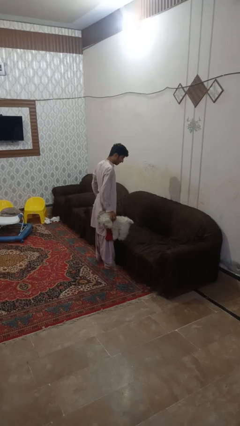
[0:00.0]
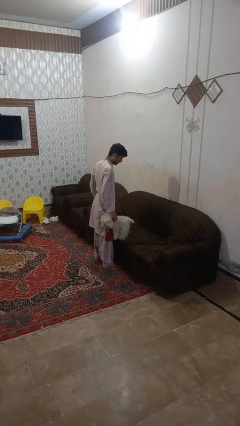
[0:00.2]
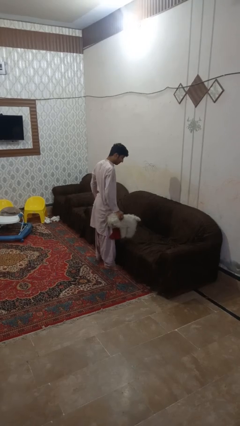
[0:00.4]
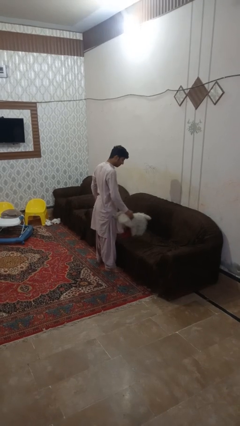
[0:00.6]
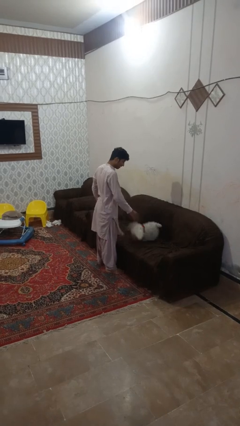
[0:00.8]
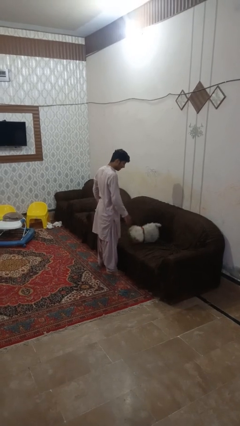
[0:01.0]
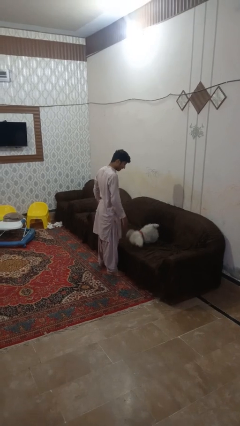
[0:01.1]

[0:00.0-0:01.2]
person puts down object on couch

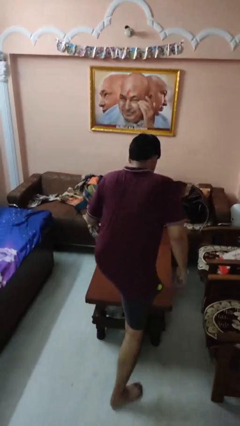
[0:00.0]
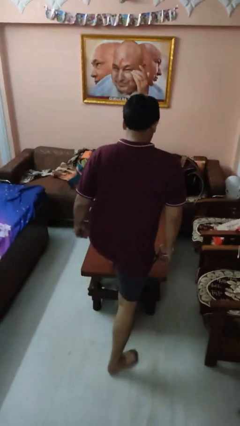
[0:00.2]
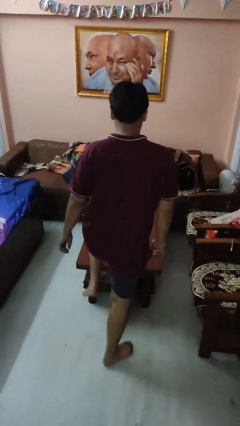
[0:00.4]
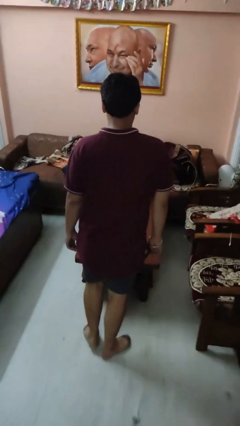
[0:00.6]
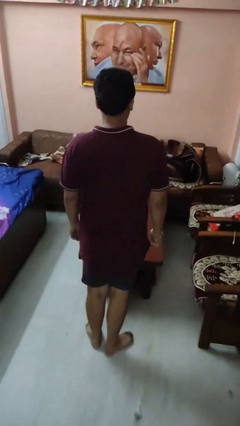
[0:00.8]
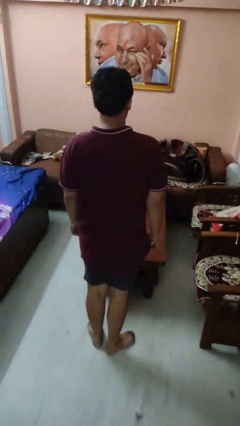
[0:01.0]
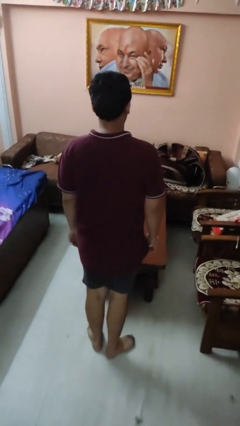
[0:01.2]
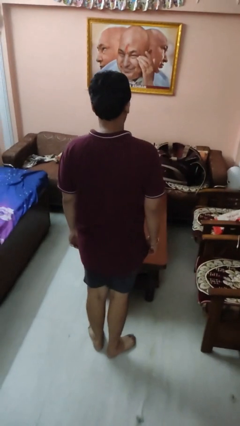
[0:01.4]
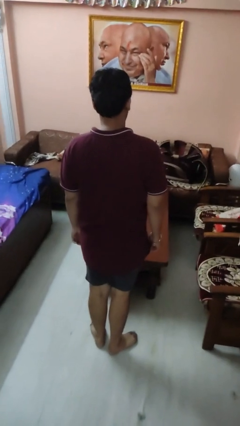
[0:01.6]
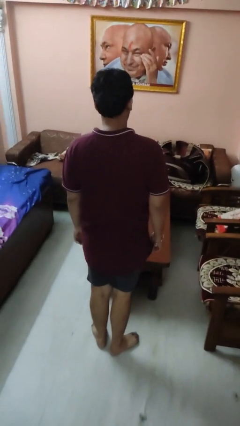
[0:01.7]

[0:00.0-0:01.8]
person climbs off table

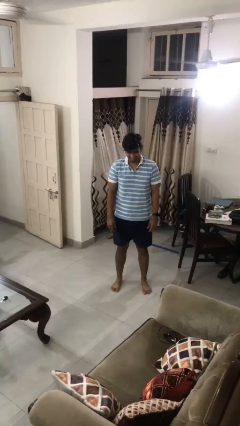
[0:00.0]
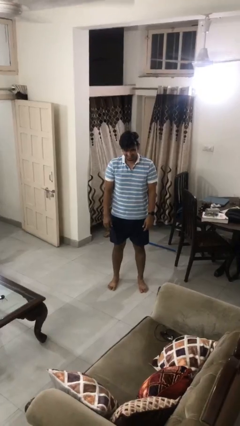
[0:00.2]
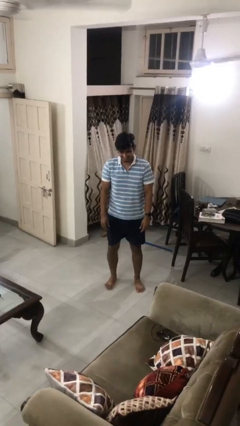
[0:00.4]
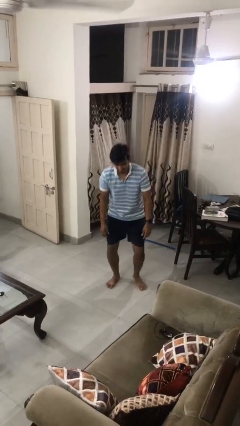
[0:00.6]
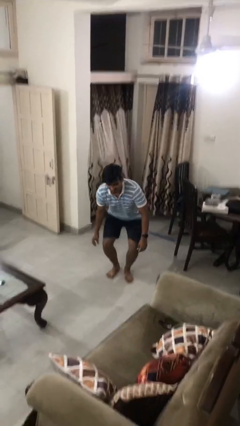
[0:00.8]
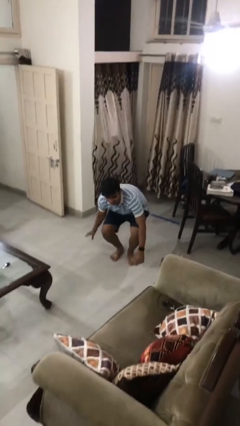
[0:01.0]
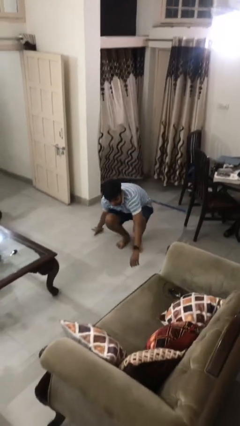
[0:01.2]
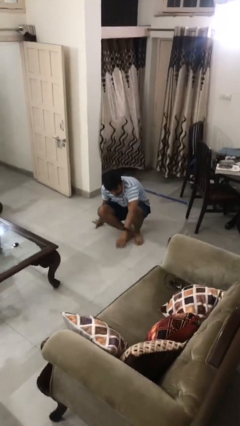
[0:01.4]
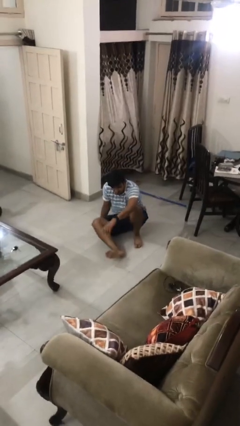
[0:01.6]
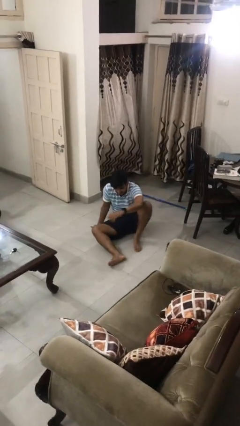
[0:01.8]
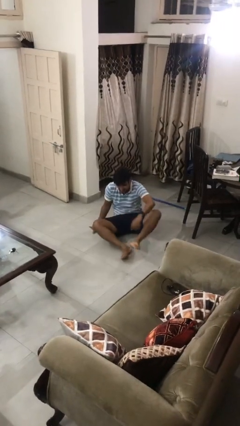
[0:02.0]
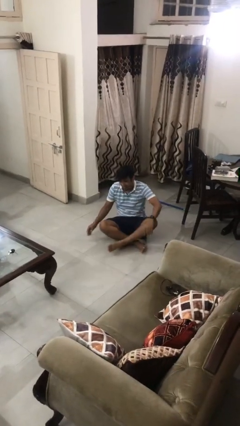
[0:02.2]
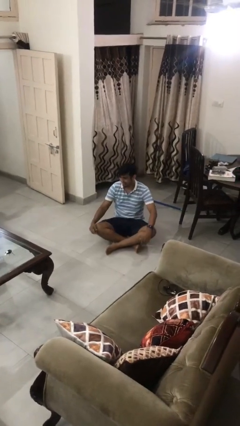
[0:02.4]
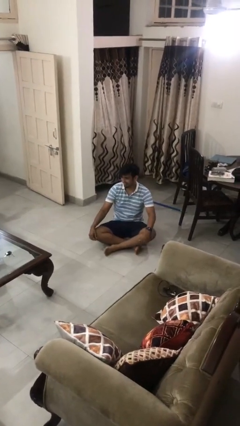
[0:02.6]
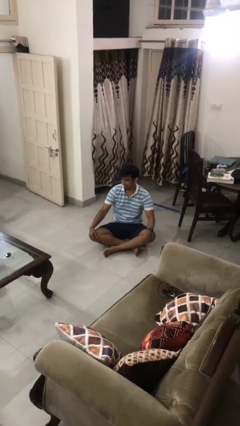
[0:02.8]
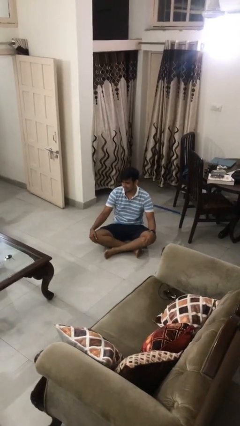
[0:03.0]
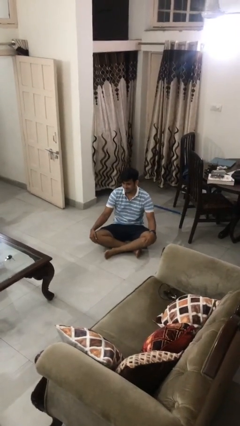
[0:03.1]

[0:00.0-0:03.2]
person sits crisscross

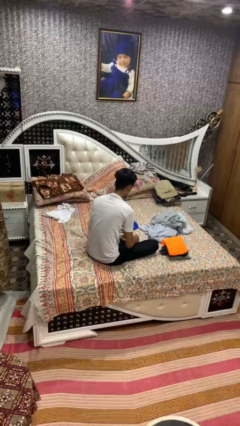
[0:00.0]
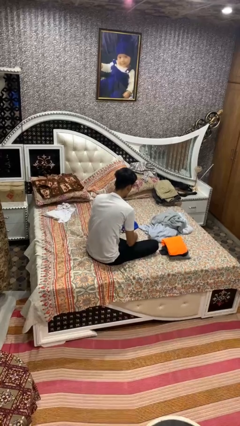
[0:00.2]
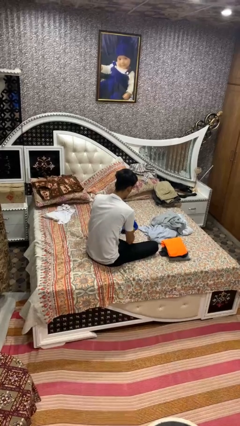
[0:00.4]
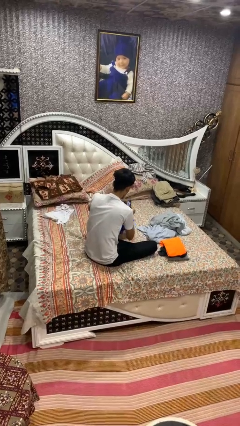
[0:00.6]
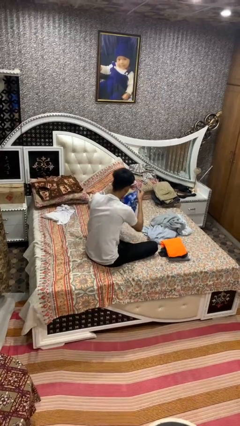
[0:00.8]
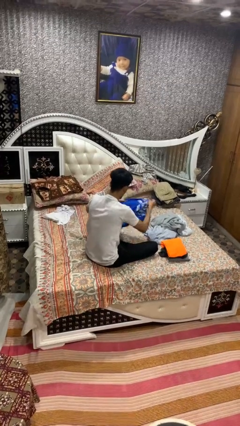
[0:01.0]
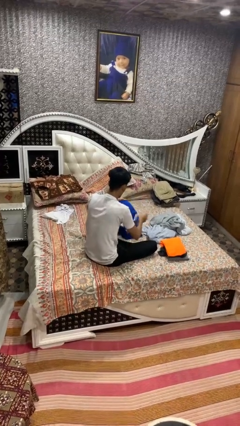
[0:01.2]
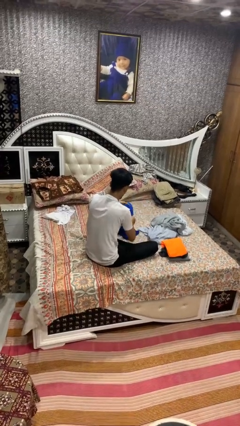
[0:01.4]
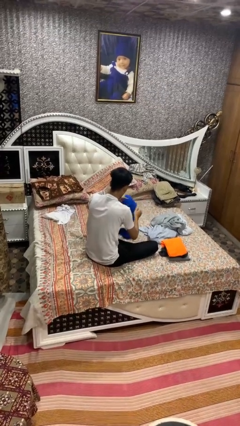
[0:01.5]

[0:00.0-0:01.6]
person folds shirt

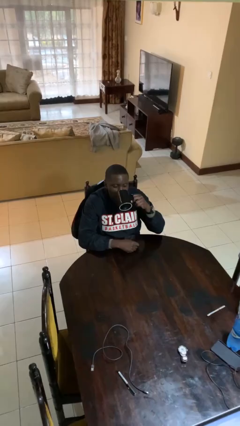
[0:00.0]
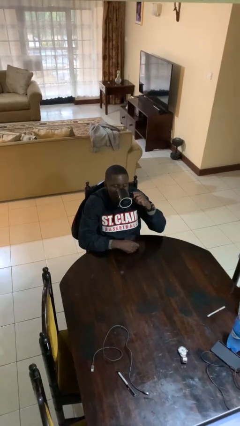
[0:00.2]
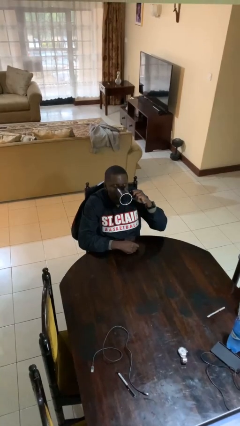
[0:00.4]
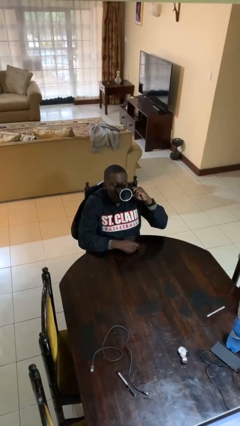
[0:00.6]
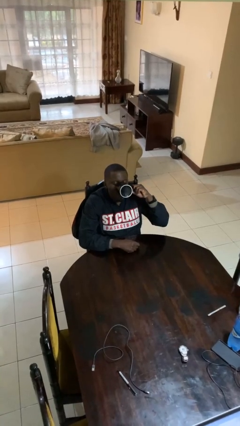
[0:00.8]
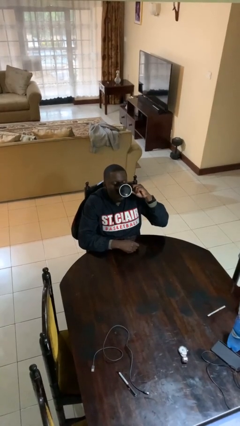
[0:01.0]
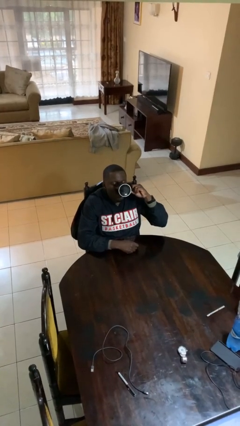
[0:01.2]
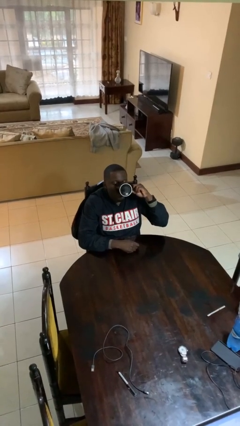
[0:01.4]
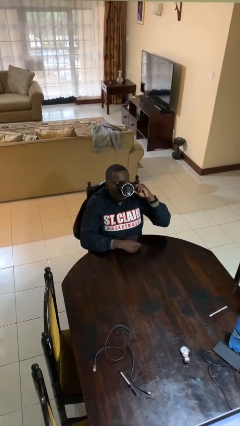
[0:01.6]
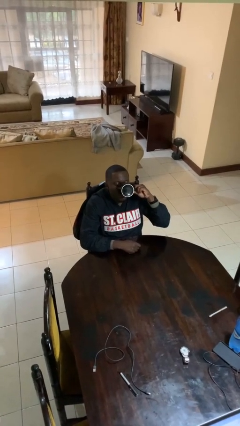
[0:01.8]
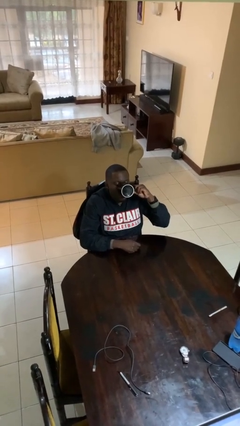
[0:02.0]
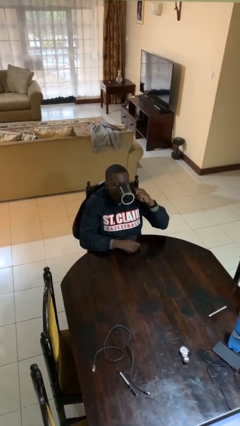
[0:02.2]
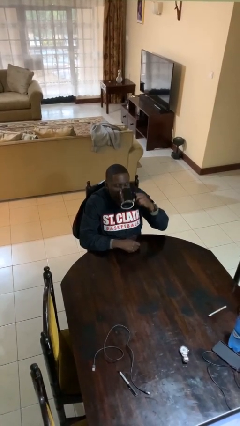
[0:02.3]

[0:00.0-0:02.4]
person drinks from mug

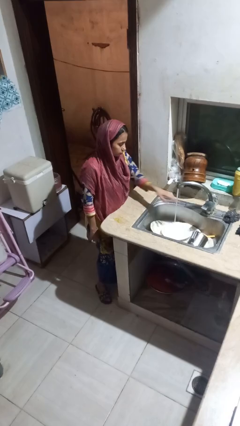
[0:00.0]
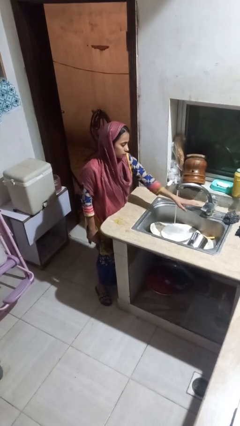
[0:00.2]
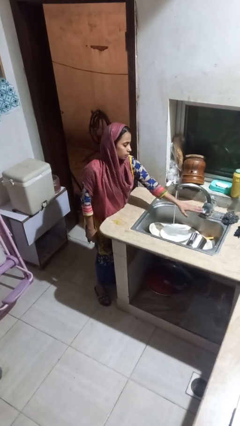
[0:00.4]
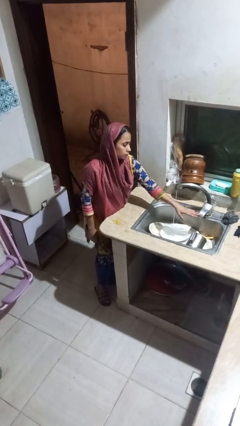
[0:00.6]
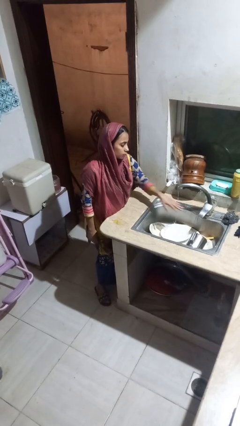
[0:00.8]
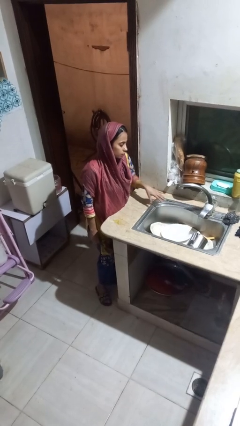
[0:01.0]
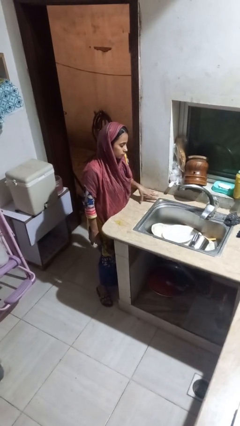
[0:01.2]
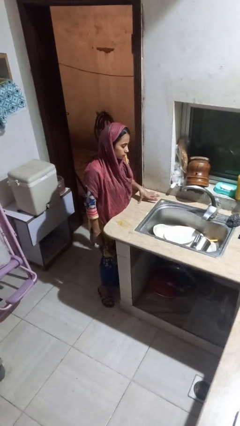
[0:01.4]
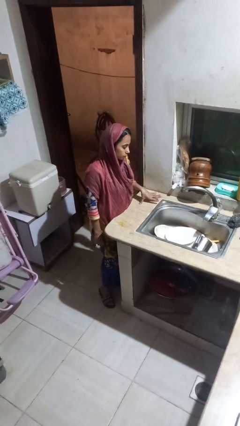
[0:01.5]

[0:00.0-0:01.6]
person turns off faucet

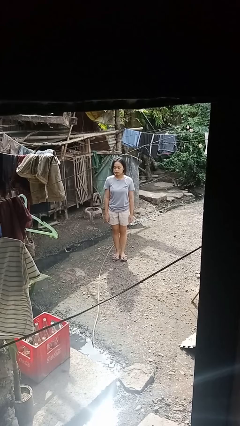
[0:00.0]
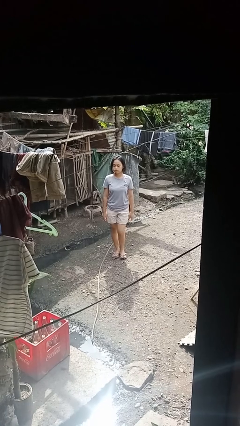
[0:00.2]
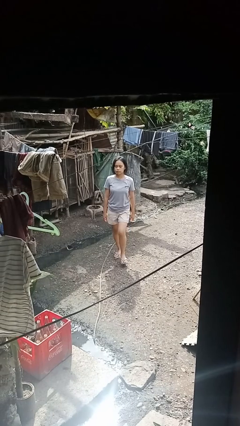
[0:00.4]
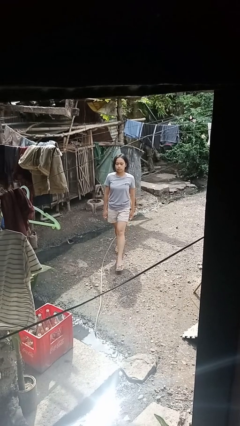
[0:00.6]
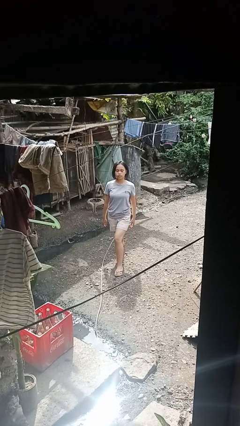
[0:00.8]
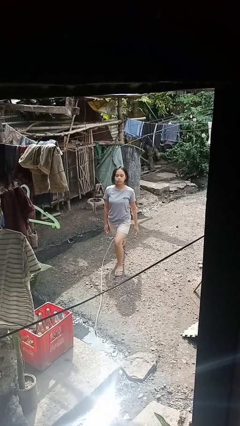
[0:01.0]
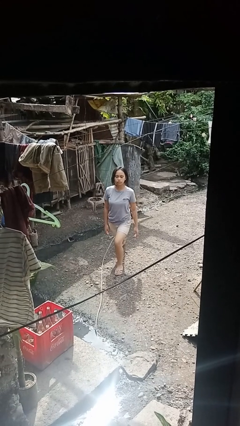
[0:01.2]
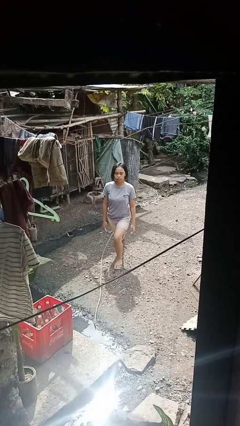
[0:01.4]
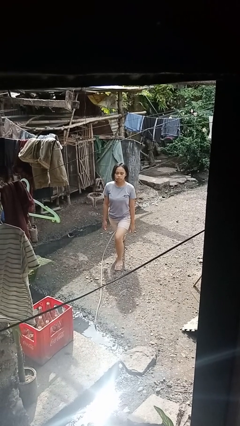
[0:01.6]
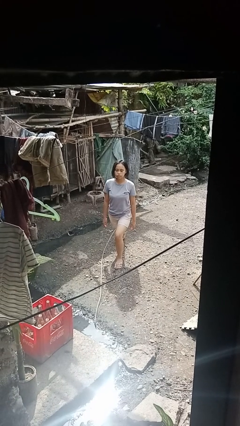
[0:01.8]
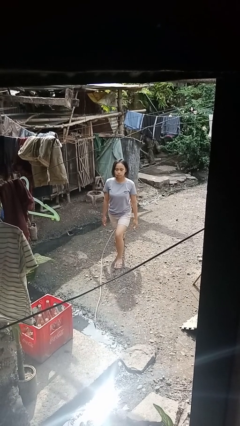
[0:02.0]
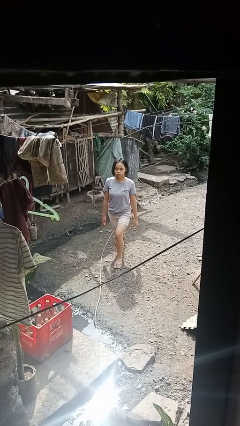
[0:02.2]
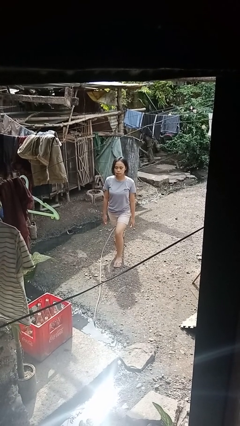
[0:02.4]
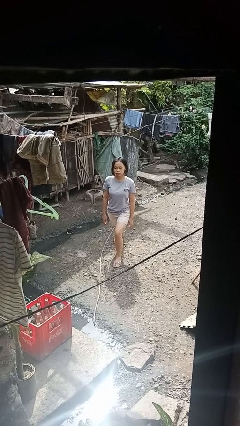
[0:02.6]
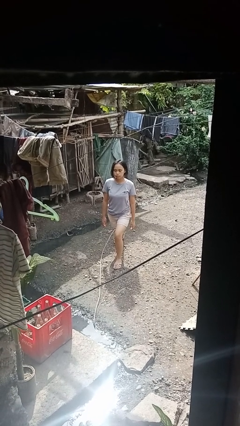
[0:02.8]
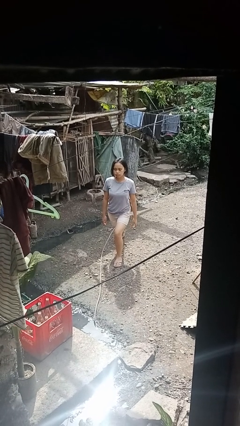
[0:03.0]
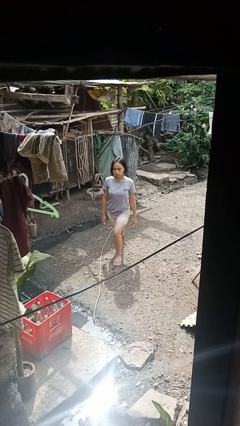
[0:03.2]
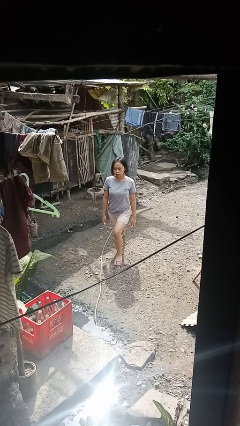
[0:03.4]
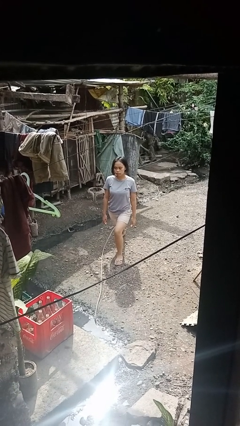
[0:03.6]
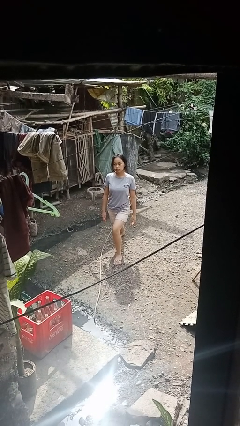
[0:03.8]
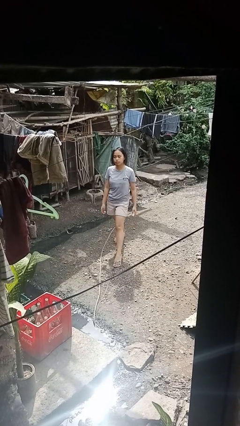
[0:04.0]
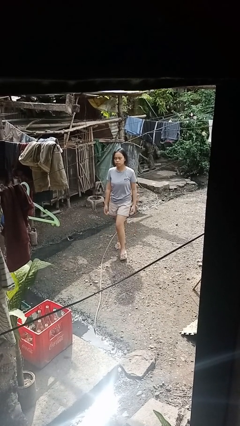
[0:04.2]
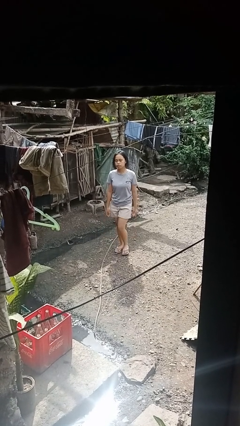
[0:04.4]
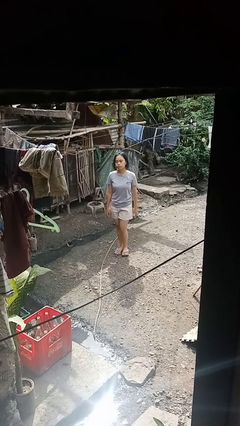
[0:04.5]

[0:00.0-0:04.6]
person exercises with lunges

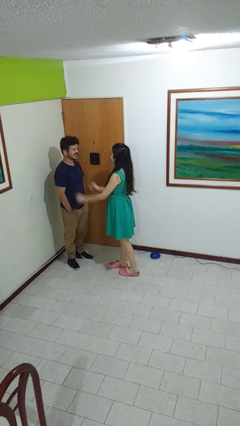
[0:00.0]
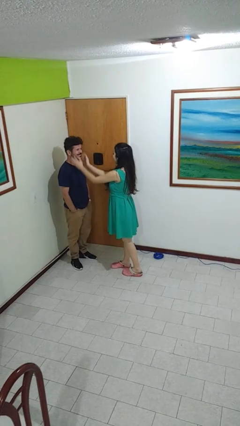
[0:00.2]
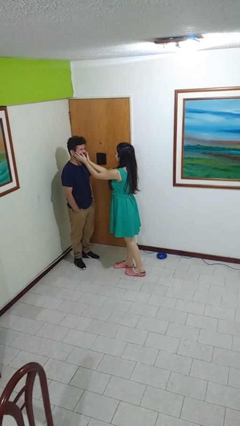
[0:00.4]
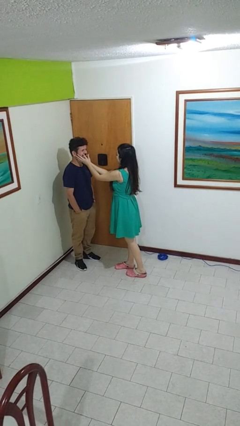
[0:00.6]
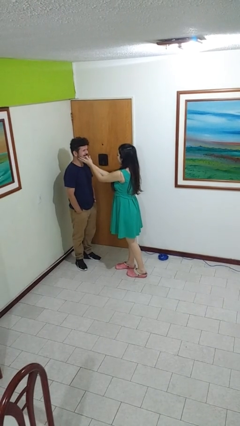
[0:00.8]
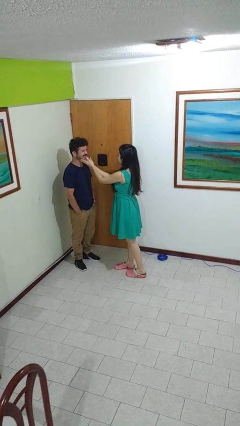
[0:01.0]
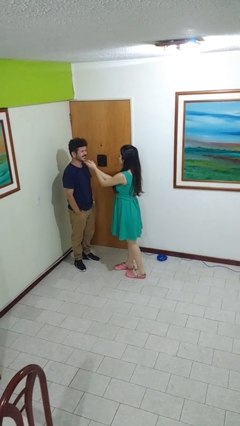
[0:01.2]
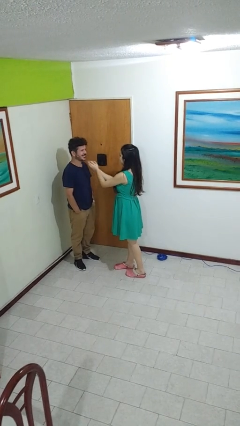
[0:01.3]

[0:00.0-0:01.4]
person touches face of person
